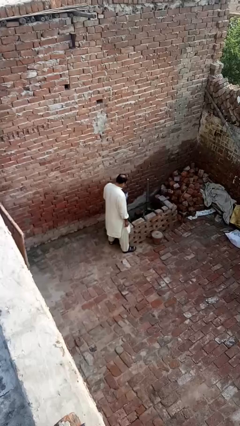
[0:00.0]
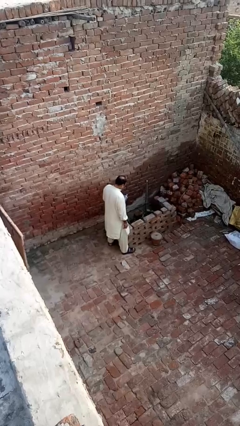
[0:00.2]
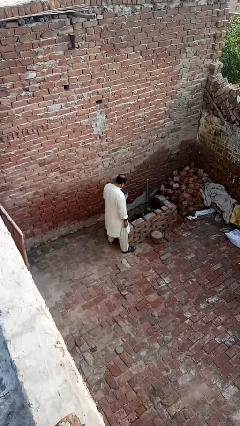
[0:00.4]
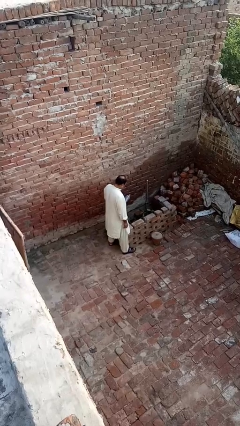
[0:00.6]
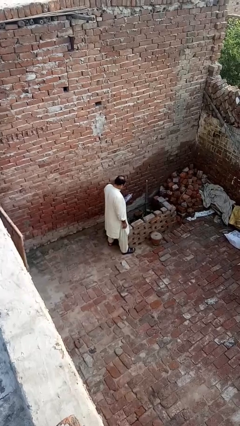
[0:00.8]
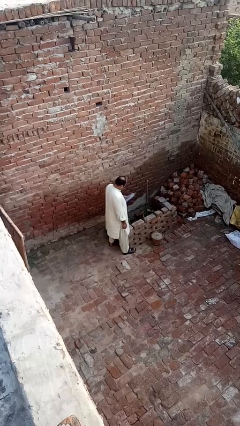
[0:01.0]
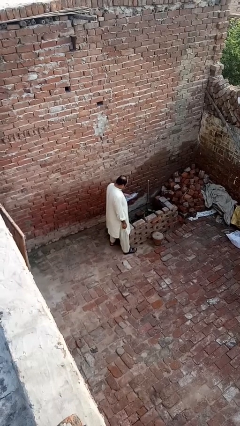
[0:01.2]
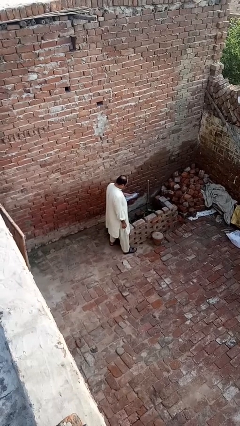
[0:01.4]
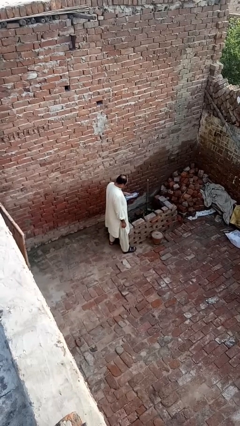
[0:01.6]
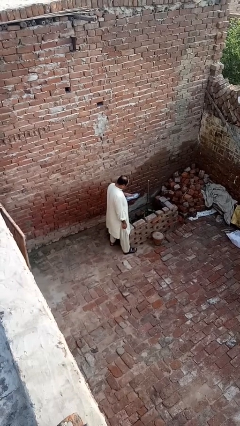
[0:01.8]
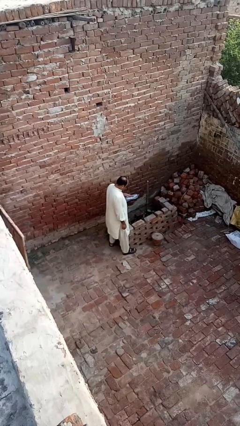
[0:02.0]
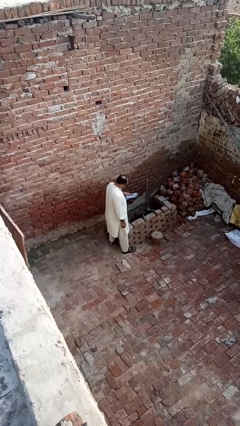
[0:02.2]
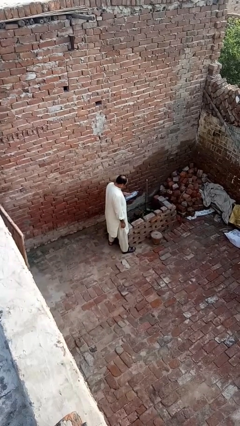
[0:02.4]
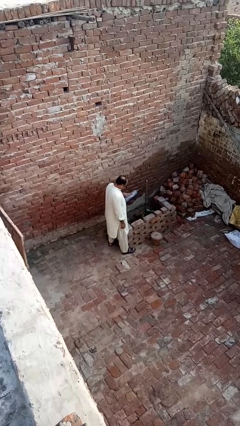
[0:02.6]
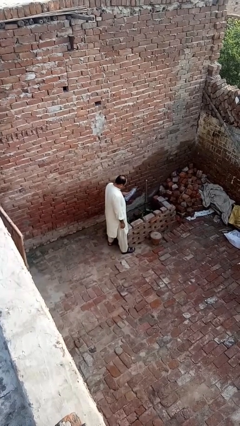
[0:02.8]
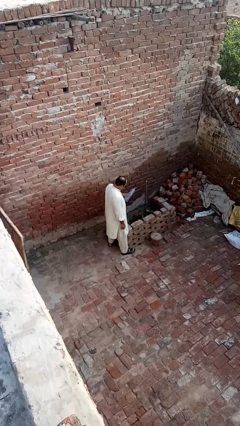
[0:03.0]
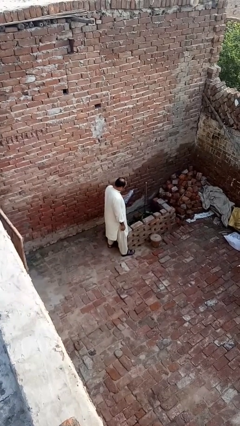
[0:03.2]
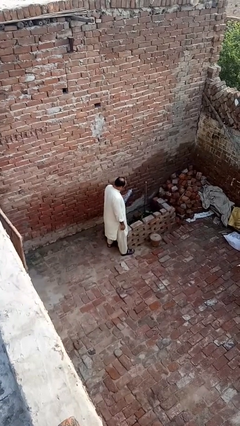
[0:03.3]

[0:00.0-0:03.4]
person waters houseplant

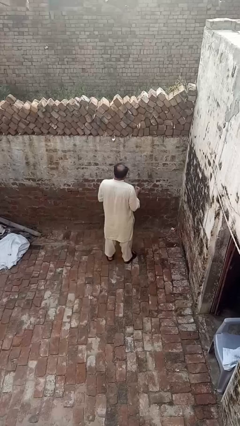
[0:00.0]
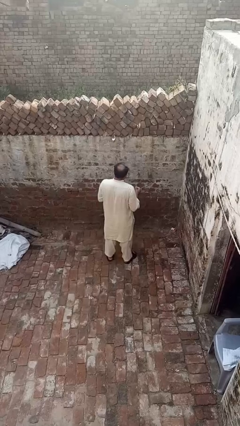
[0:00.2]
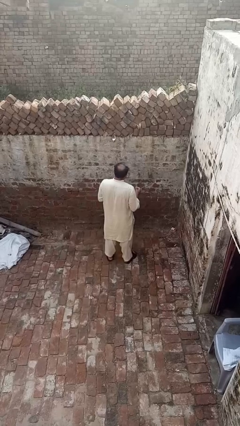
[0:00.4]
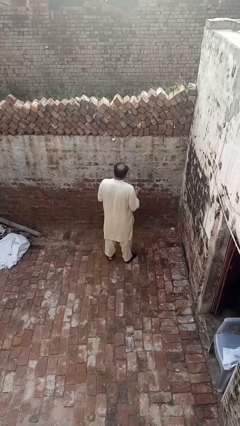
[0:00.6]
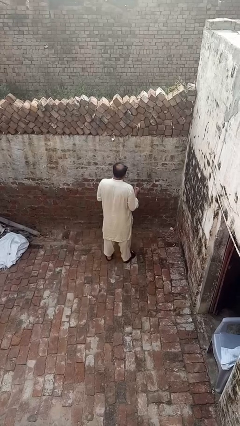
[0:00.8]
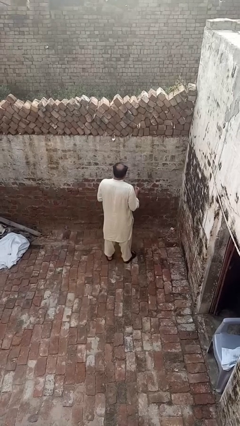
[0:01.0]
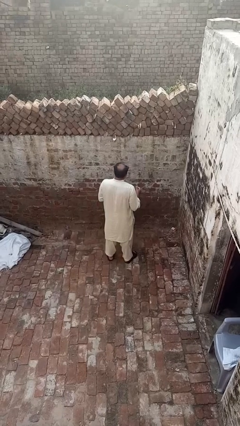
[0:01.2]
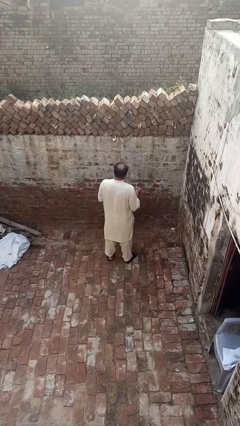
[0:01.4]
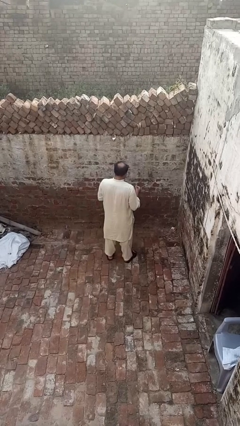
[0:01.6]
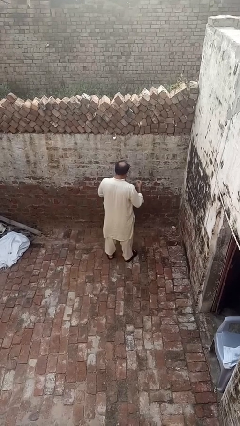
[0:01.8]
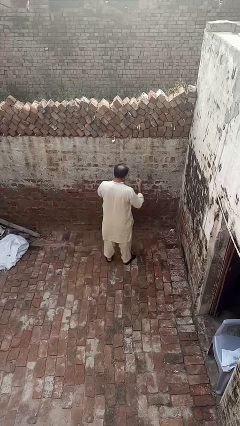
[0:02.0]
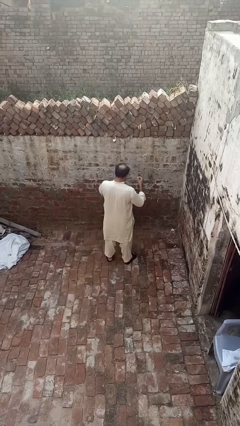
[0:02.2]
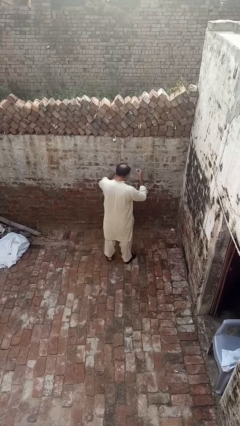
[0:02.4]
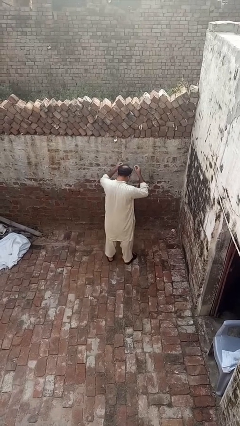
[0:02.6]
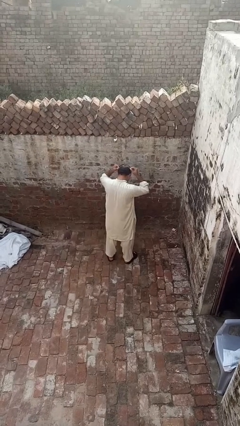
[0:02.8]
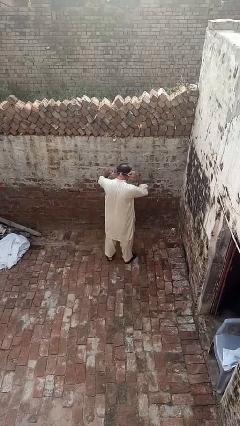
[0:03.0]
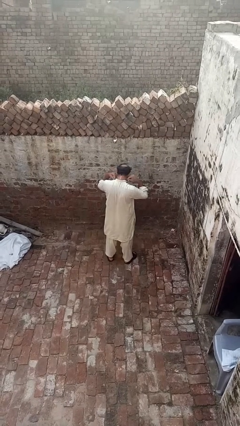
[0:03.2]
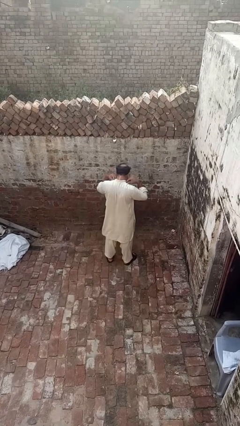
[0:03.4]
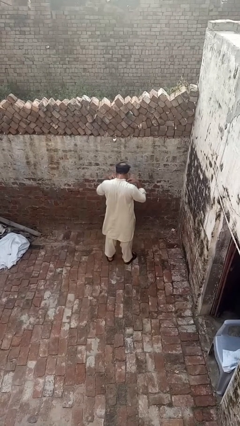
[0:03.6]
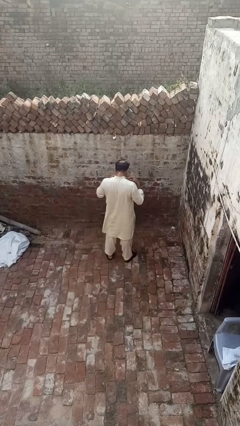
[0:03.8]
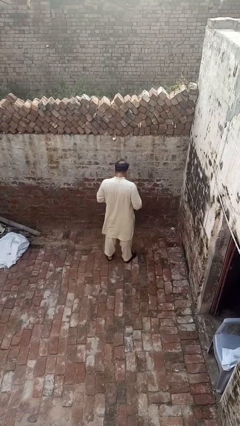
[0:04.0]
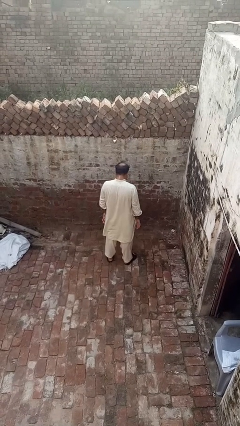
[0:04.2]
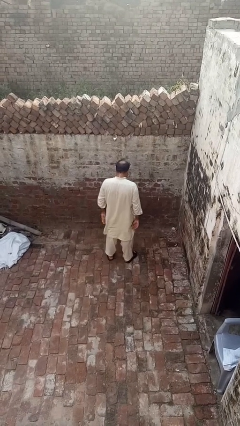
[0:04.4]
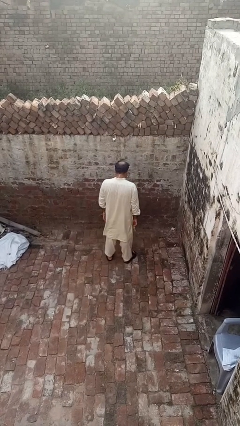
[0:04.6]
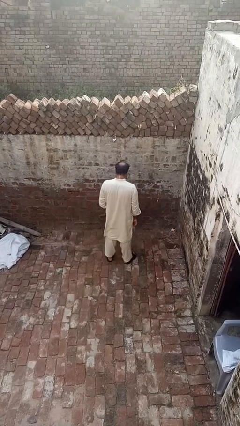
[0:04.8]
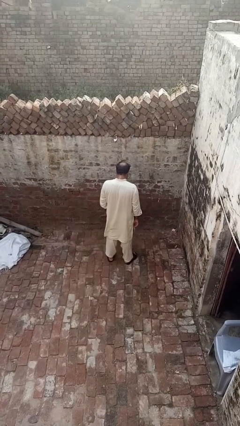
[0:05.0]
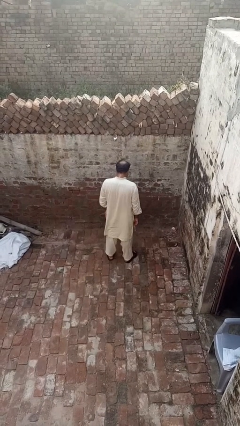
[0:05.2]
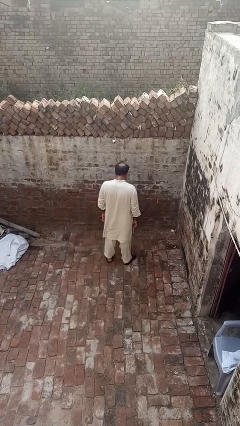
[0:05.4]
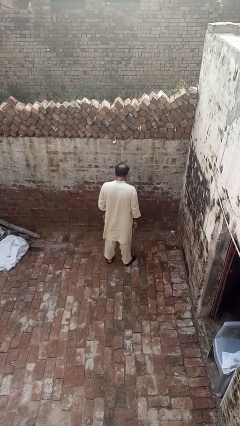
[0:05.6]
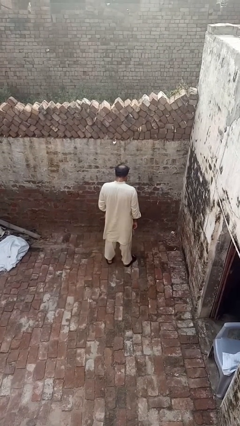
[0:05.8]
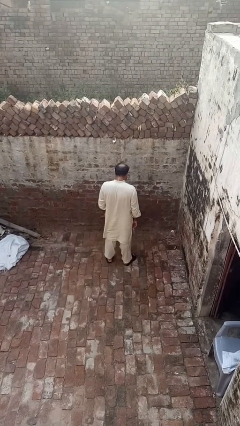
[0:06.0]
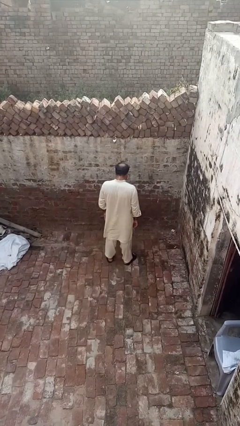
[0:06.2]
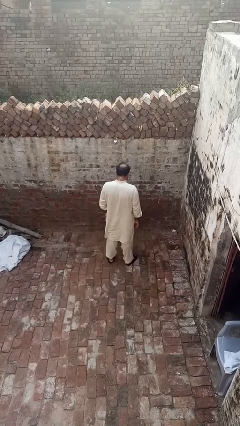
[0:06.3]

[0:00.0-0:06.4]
person puts on necklace

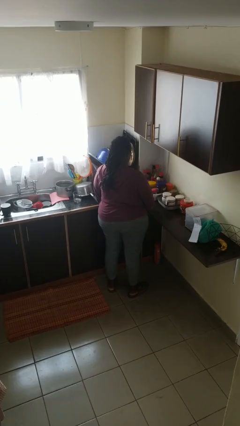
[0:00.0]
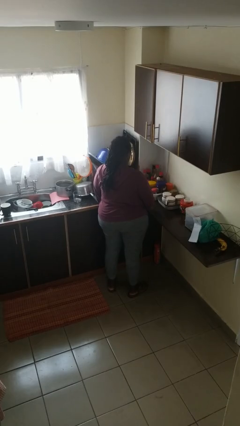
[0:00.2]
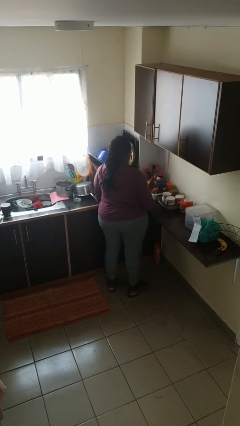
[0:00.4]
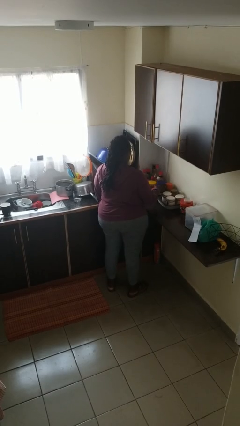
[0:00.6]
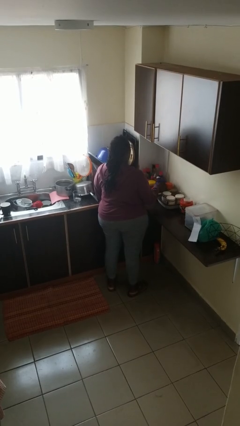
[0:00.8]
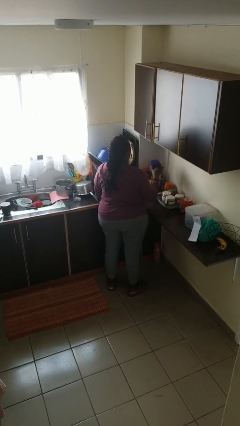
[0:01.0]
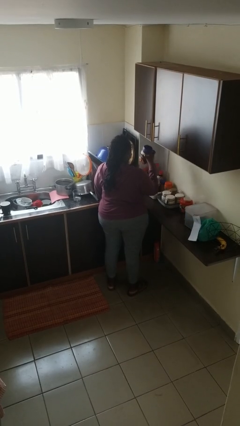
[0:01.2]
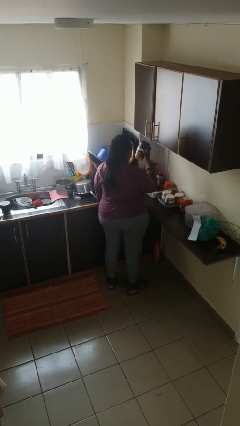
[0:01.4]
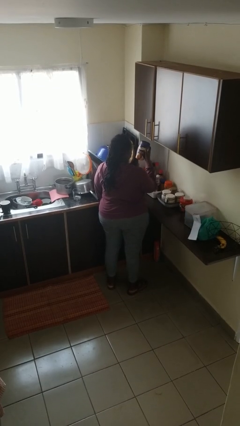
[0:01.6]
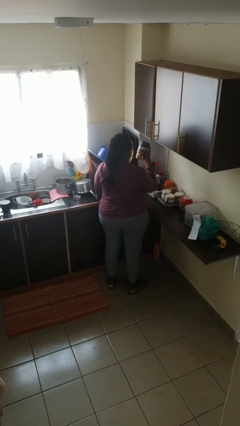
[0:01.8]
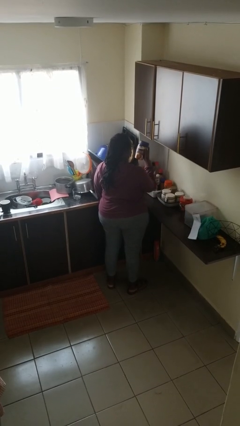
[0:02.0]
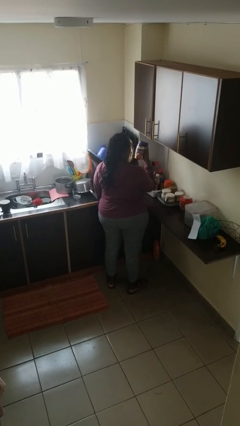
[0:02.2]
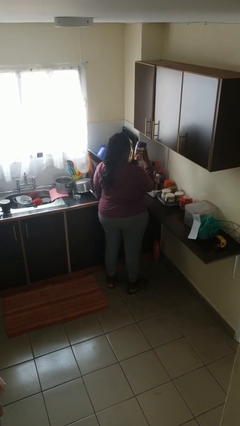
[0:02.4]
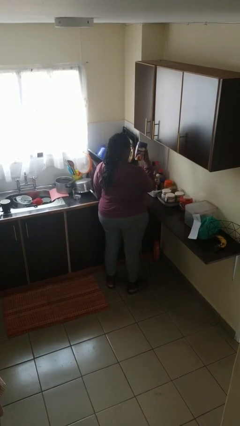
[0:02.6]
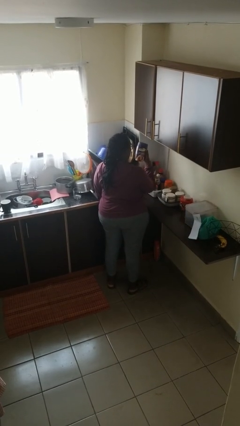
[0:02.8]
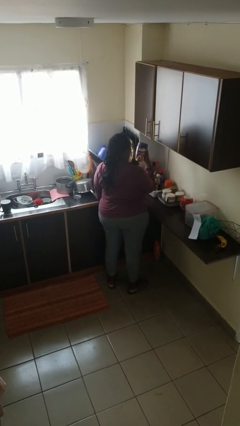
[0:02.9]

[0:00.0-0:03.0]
person picks up object from countertop

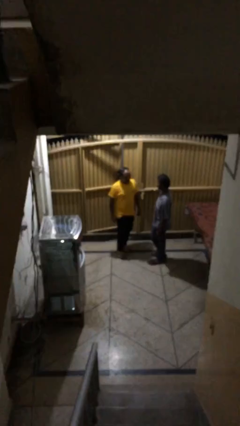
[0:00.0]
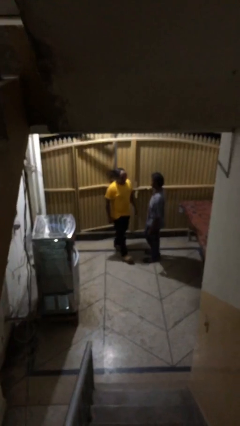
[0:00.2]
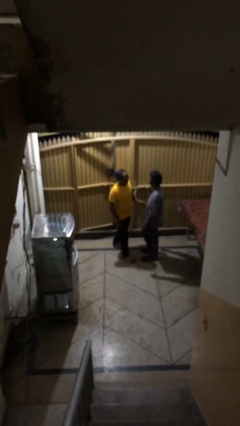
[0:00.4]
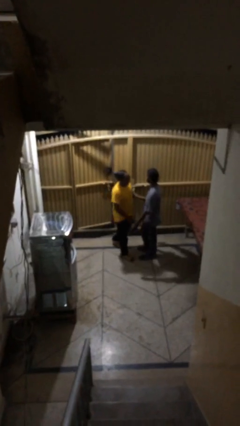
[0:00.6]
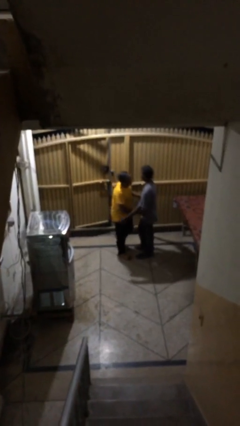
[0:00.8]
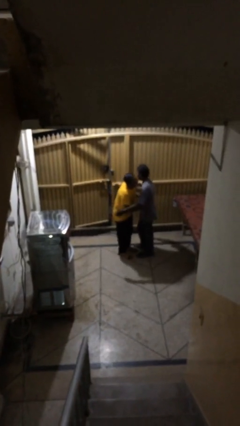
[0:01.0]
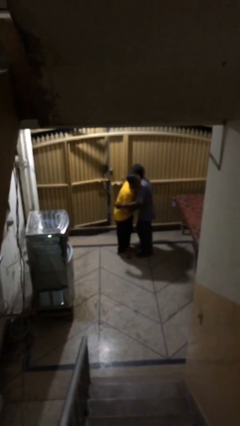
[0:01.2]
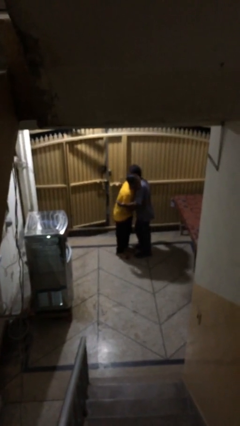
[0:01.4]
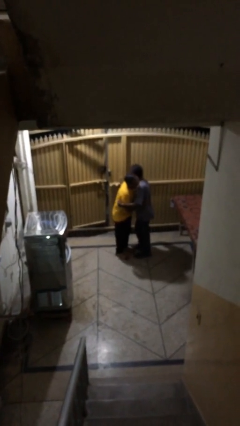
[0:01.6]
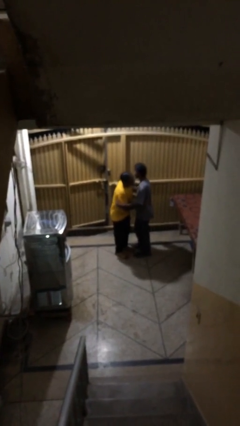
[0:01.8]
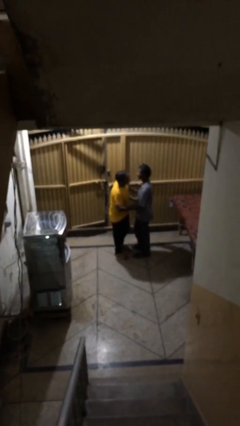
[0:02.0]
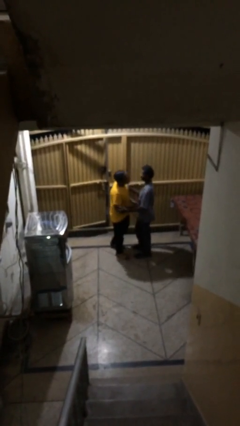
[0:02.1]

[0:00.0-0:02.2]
person embraces person

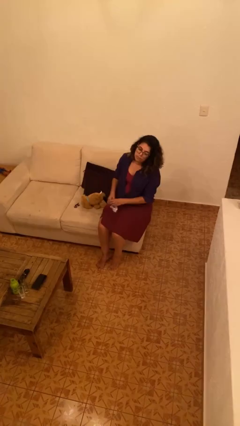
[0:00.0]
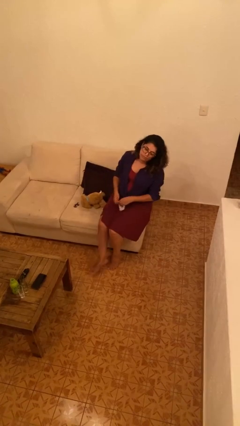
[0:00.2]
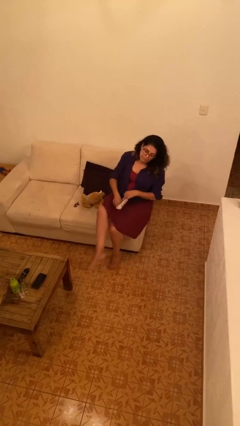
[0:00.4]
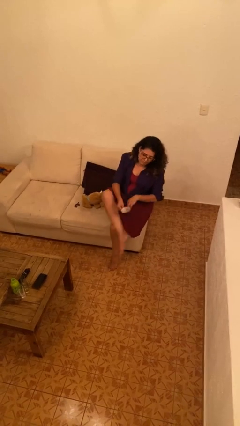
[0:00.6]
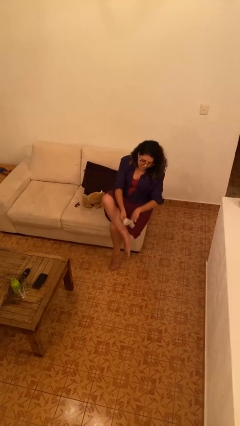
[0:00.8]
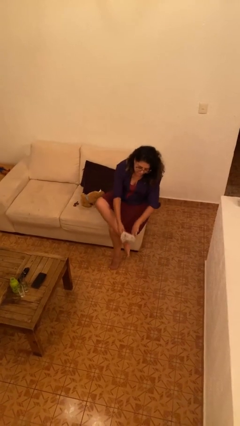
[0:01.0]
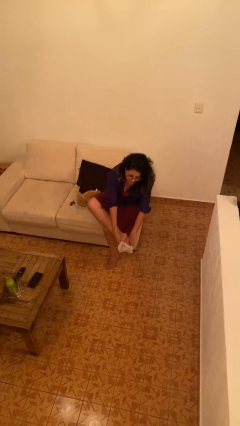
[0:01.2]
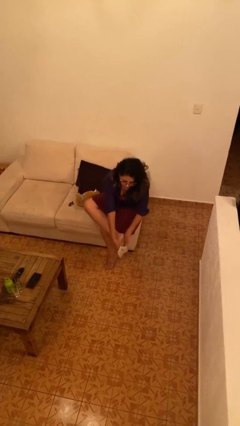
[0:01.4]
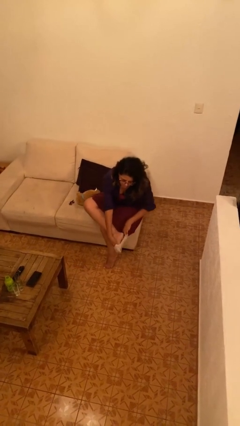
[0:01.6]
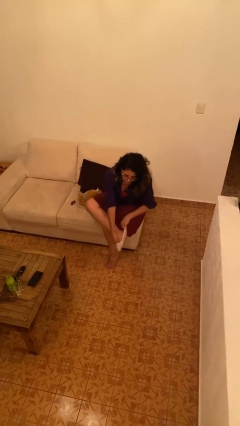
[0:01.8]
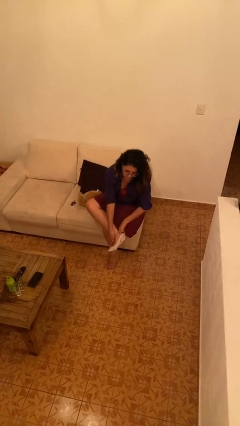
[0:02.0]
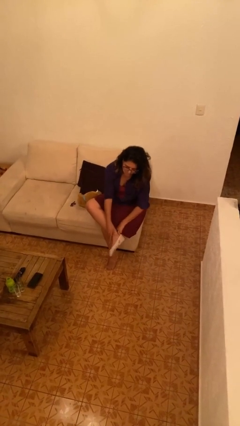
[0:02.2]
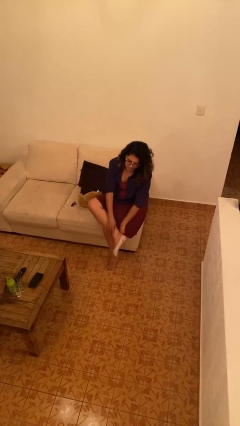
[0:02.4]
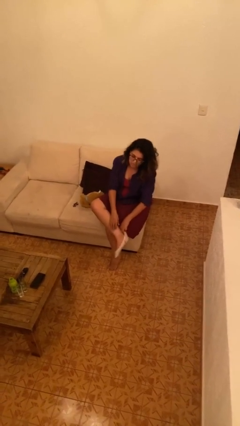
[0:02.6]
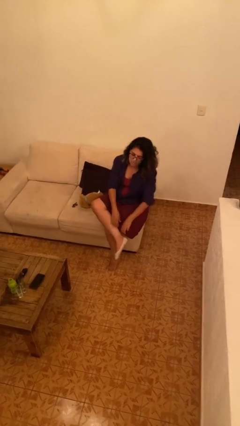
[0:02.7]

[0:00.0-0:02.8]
person puts on socks
